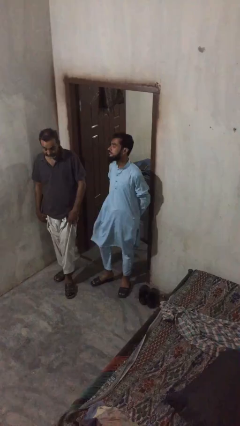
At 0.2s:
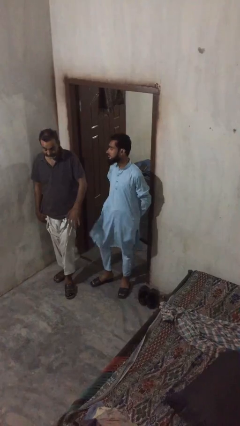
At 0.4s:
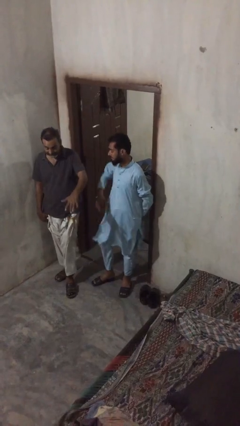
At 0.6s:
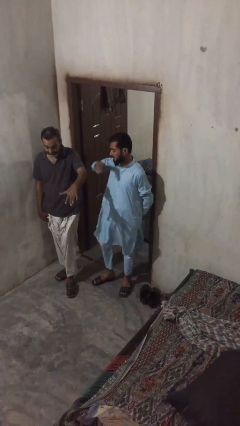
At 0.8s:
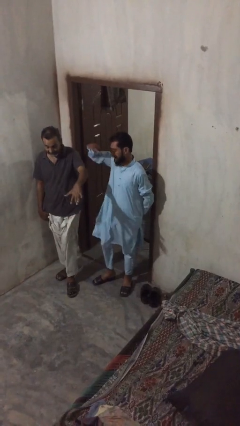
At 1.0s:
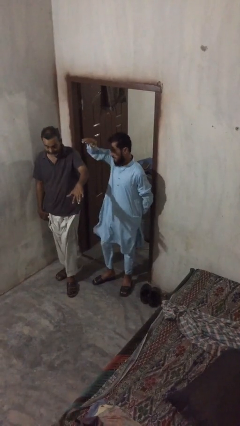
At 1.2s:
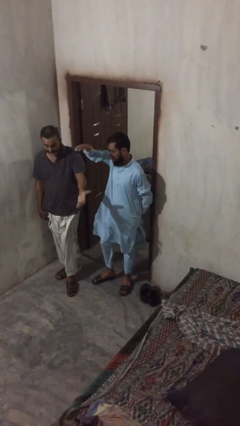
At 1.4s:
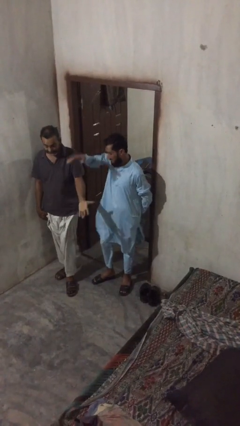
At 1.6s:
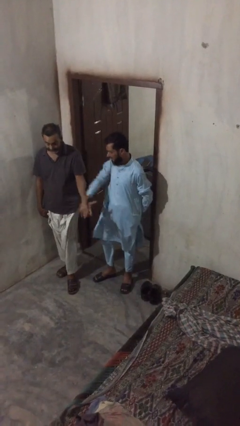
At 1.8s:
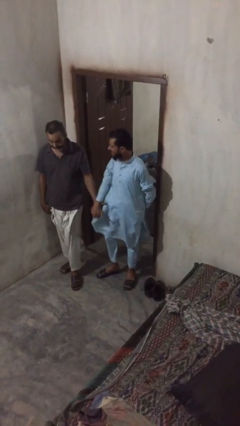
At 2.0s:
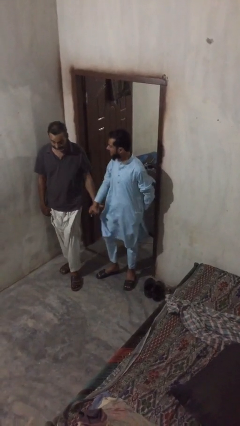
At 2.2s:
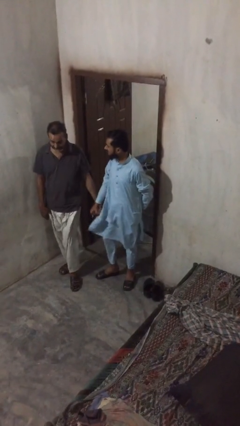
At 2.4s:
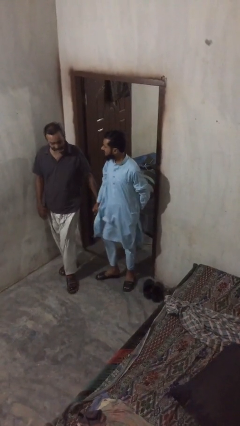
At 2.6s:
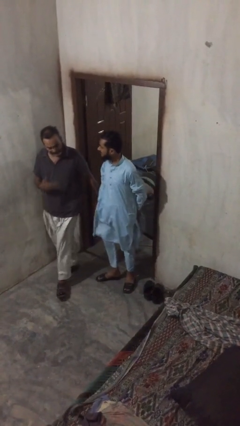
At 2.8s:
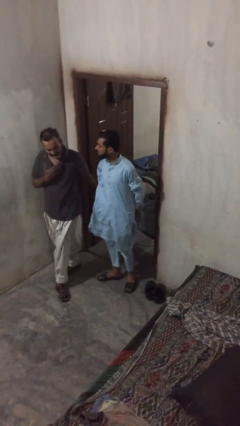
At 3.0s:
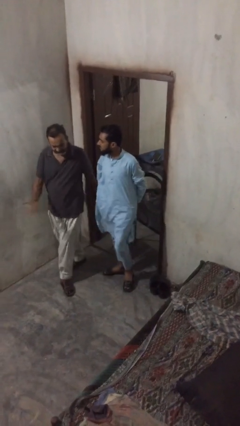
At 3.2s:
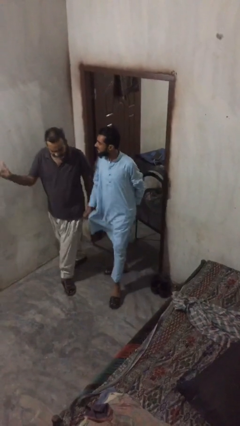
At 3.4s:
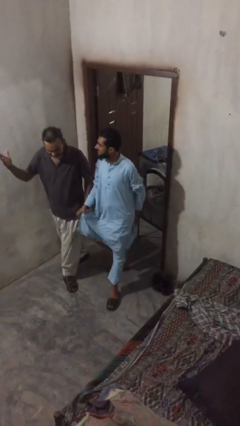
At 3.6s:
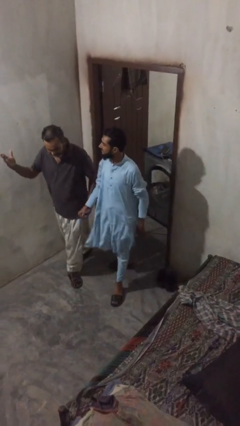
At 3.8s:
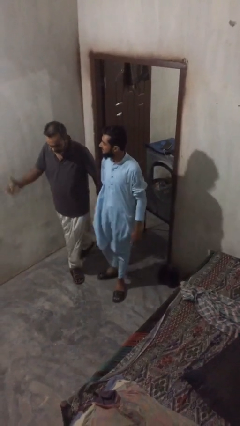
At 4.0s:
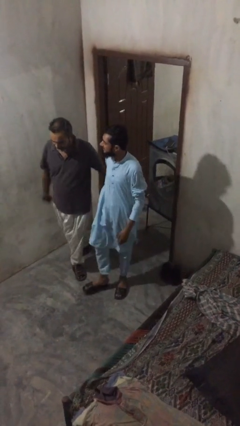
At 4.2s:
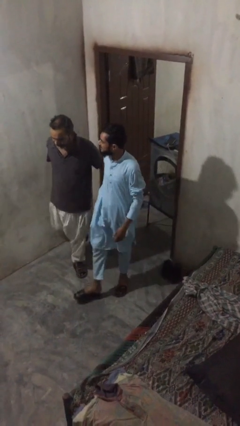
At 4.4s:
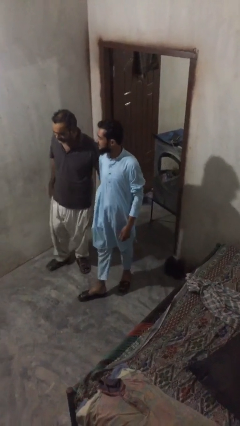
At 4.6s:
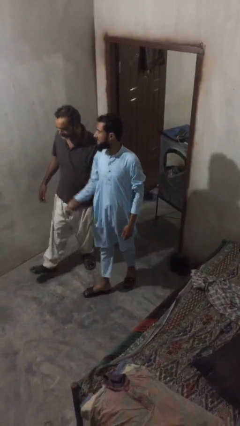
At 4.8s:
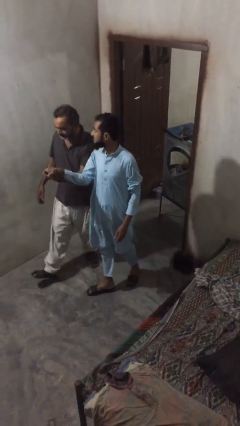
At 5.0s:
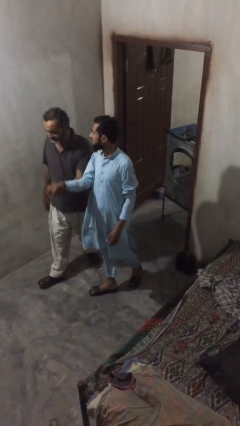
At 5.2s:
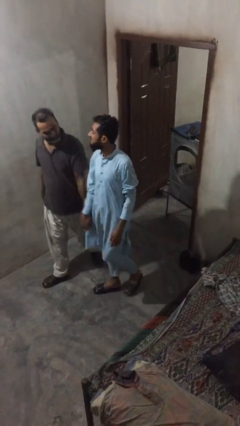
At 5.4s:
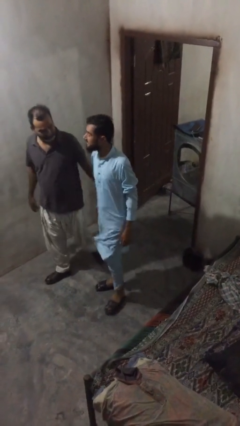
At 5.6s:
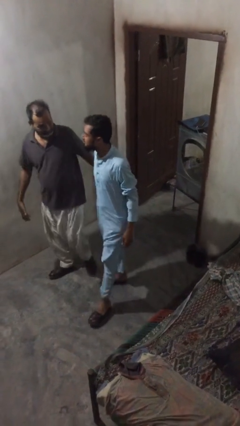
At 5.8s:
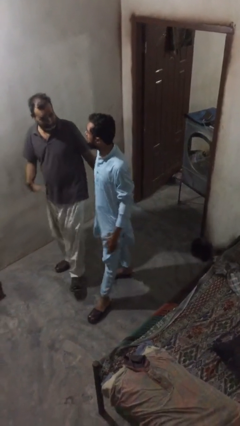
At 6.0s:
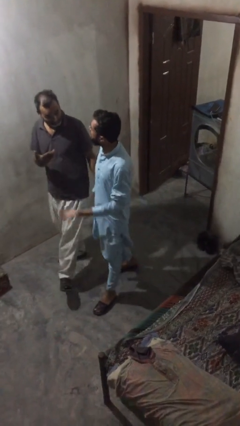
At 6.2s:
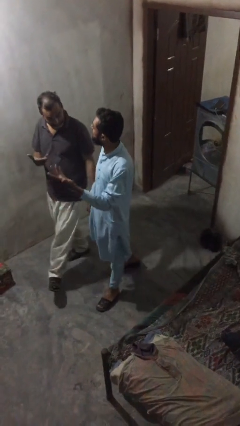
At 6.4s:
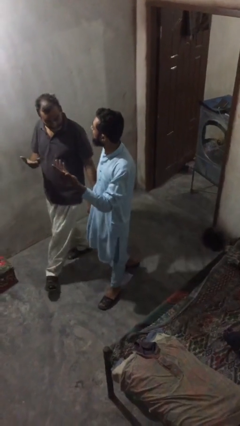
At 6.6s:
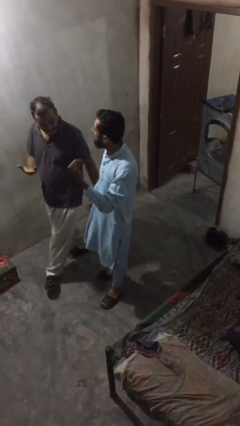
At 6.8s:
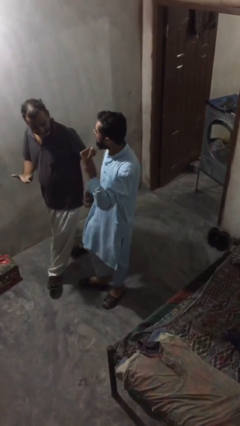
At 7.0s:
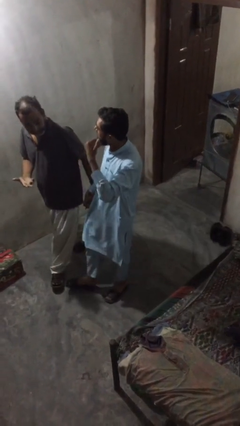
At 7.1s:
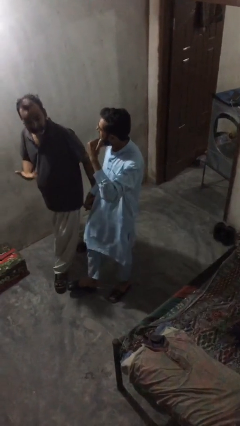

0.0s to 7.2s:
person holds hand

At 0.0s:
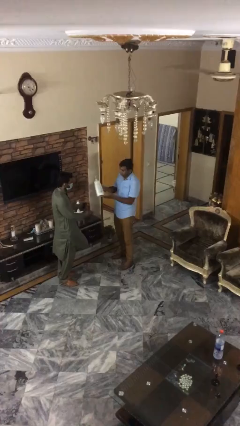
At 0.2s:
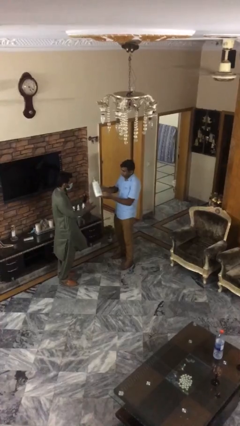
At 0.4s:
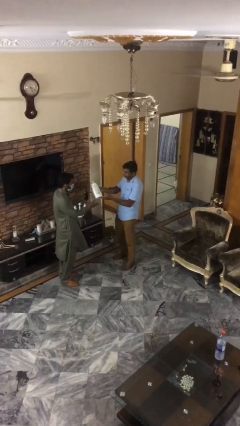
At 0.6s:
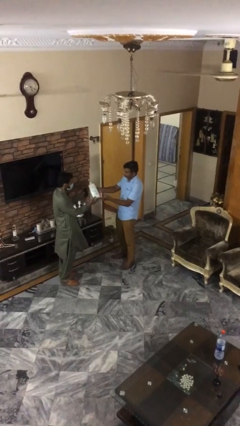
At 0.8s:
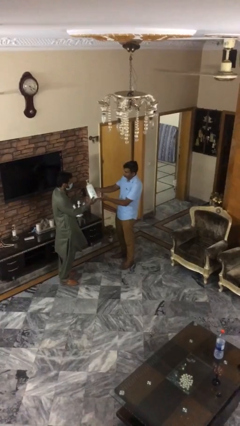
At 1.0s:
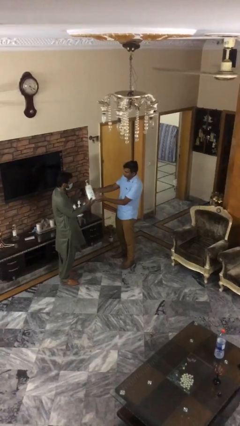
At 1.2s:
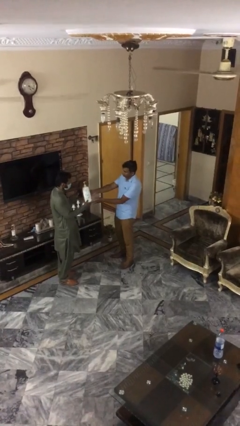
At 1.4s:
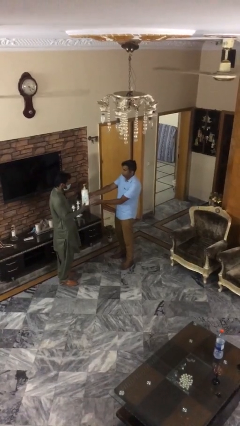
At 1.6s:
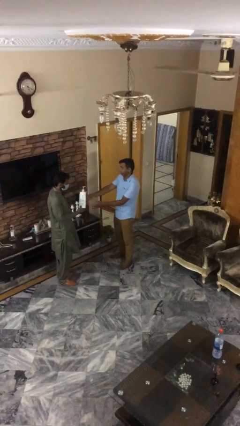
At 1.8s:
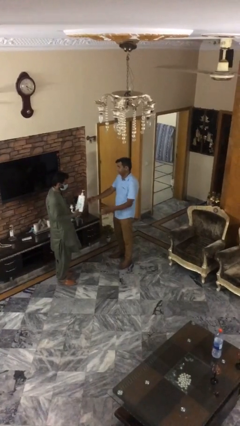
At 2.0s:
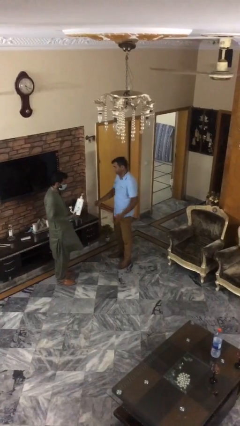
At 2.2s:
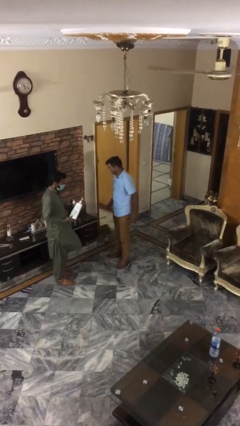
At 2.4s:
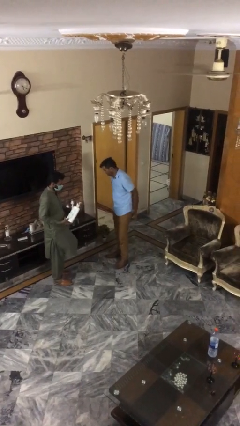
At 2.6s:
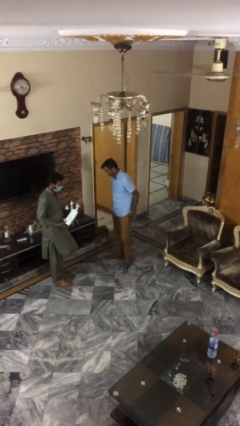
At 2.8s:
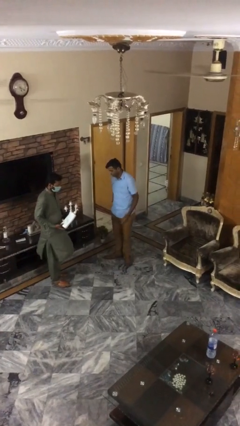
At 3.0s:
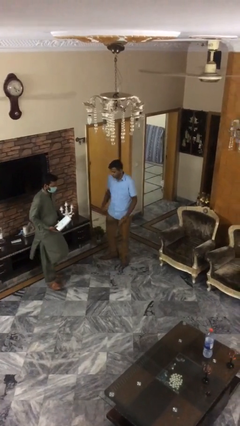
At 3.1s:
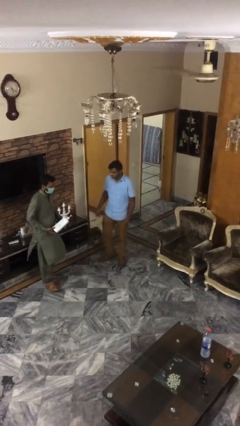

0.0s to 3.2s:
person transfers object to person

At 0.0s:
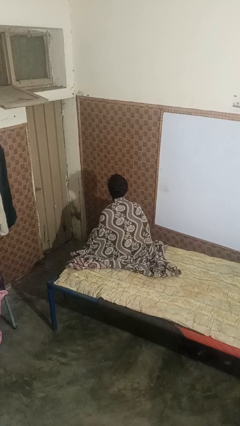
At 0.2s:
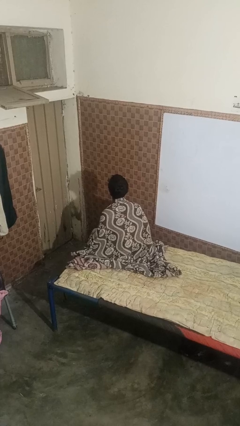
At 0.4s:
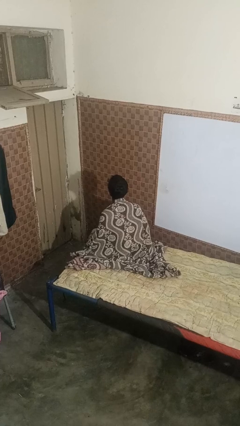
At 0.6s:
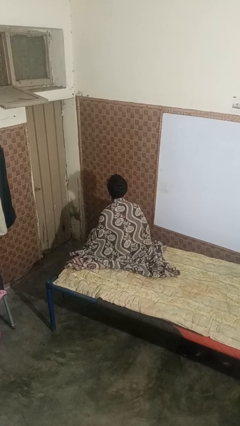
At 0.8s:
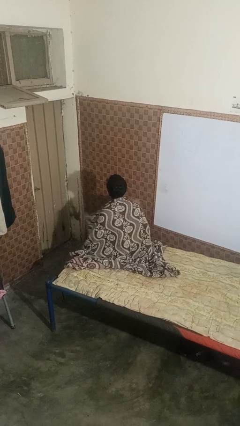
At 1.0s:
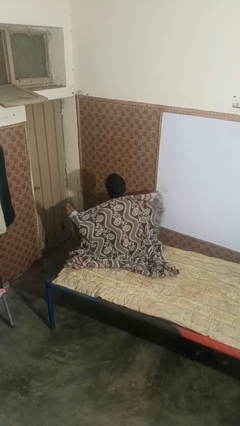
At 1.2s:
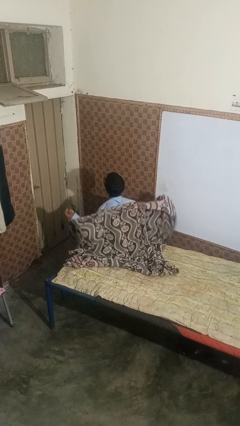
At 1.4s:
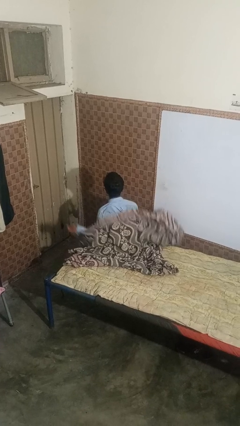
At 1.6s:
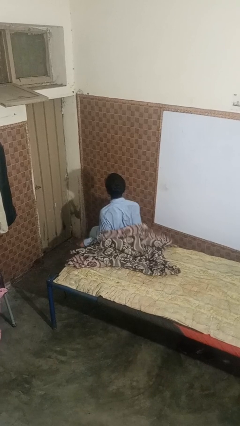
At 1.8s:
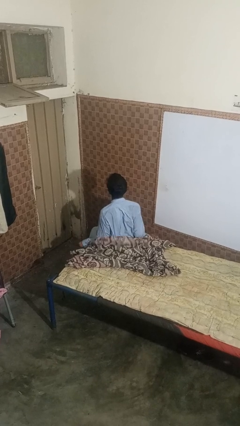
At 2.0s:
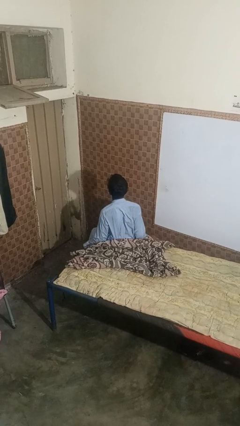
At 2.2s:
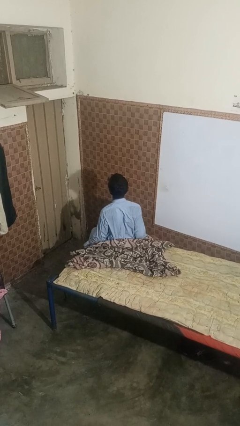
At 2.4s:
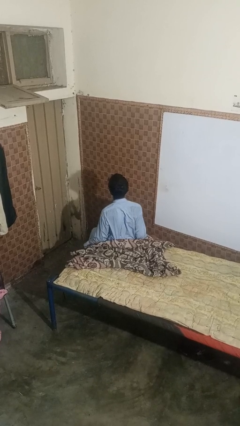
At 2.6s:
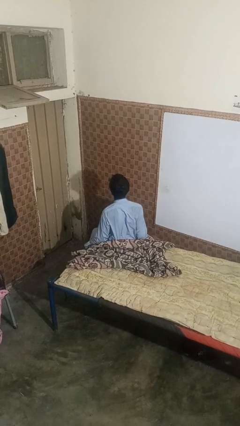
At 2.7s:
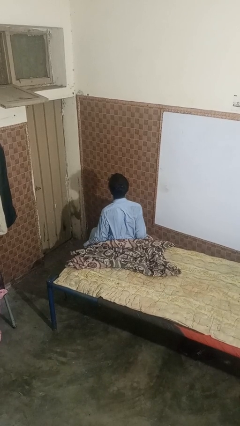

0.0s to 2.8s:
person uncovers with bedsheets

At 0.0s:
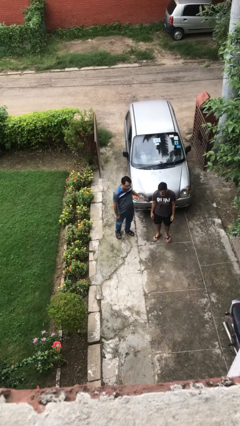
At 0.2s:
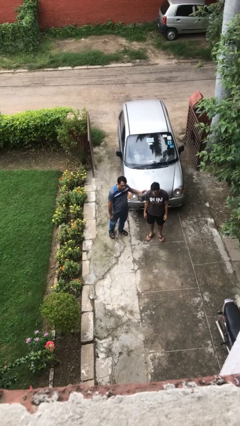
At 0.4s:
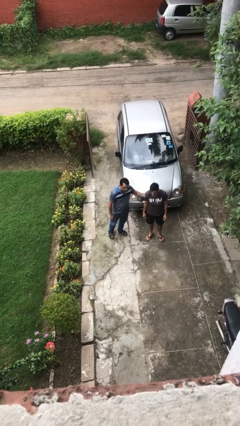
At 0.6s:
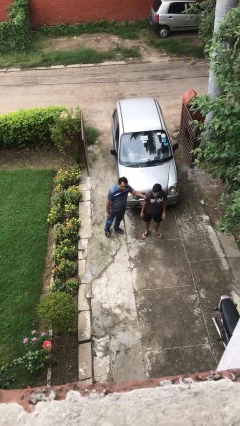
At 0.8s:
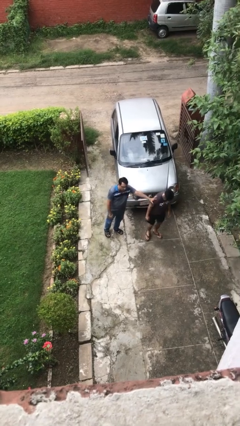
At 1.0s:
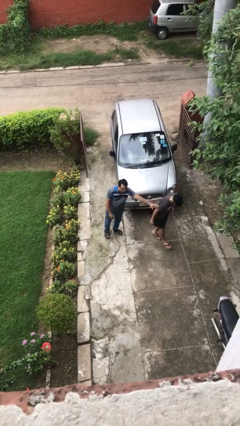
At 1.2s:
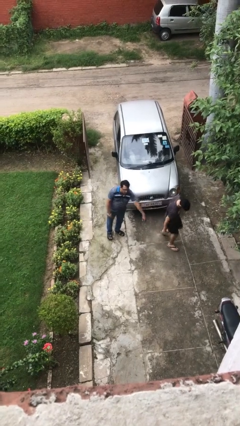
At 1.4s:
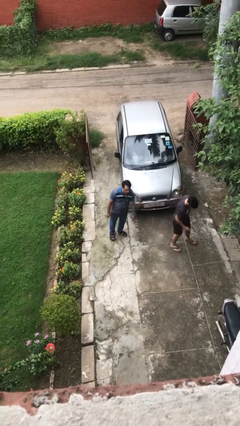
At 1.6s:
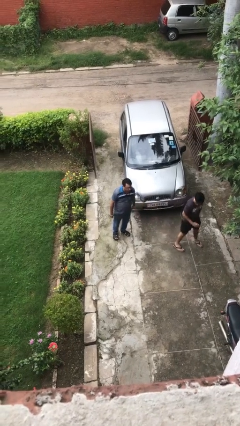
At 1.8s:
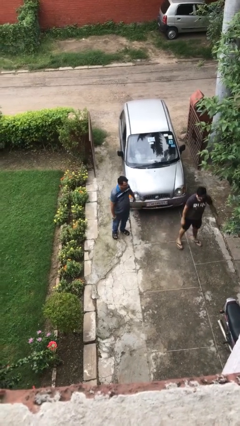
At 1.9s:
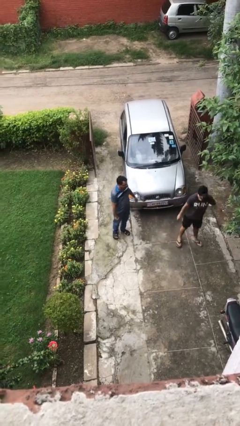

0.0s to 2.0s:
person shoves person

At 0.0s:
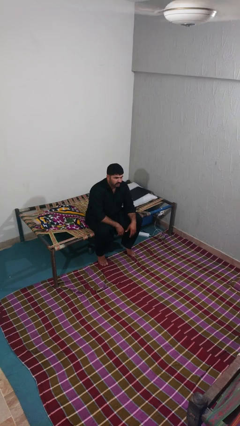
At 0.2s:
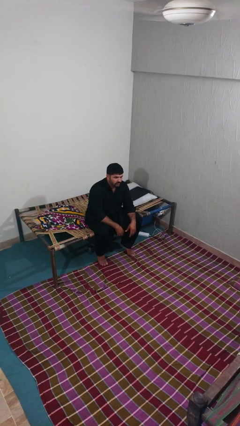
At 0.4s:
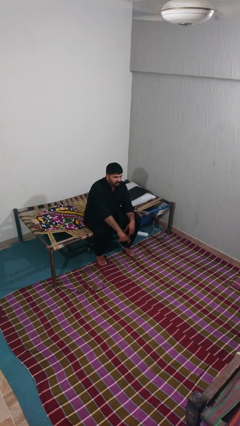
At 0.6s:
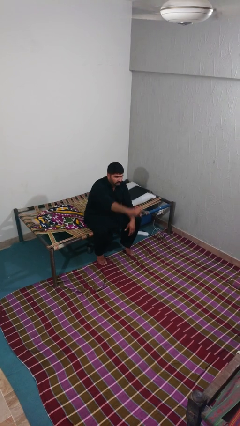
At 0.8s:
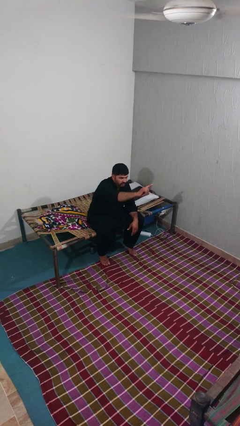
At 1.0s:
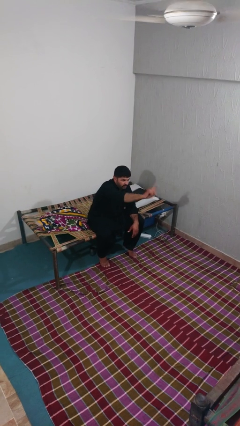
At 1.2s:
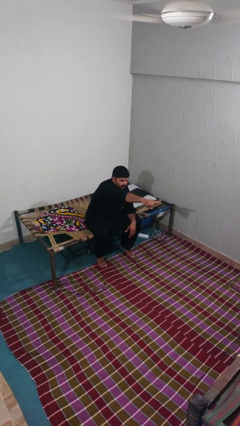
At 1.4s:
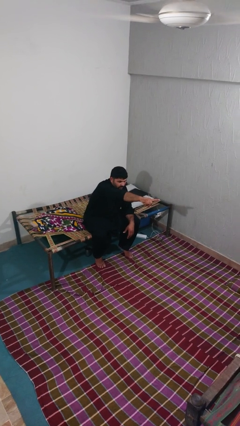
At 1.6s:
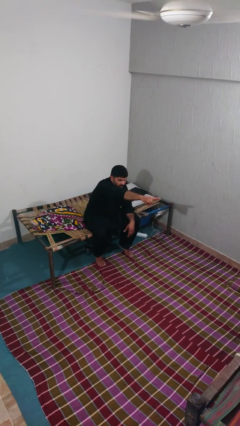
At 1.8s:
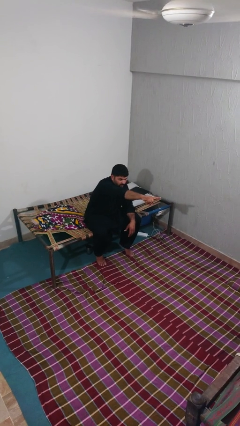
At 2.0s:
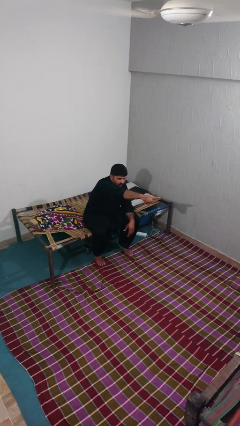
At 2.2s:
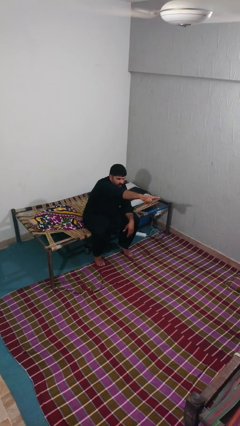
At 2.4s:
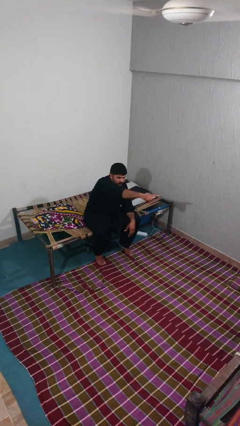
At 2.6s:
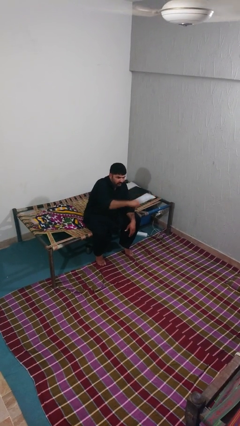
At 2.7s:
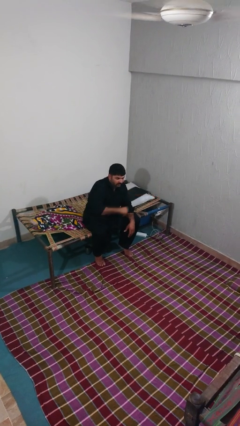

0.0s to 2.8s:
person points at person
